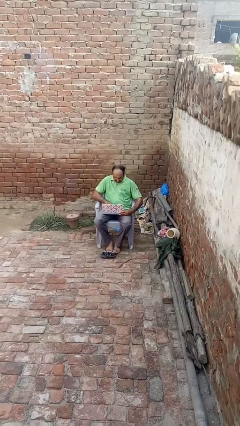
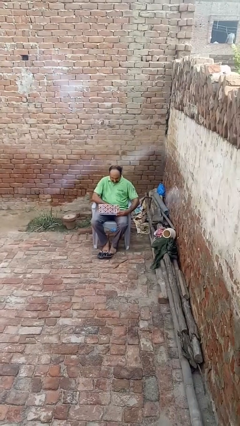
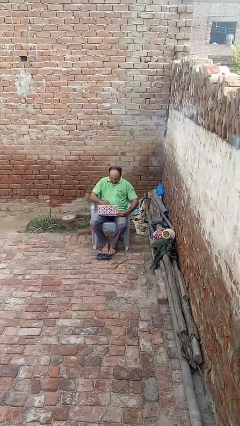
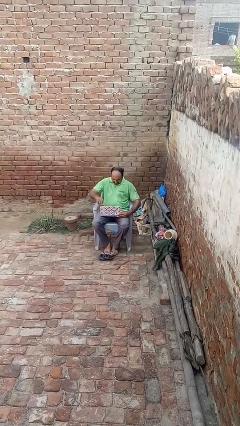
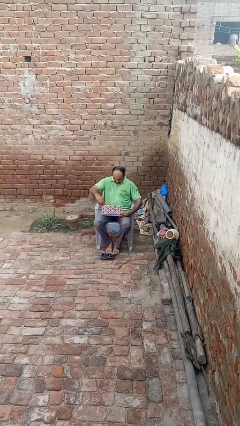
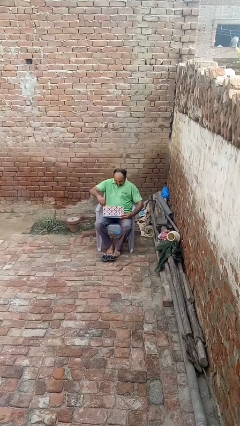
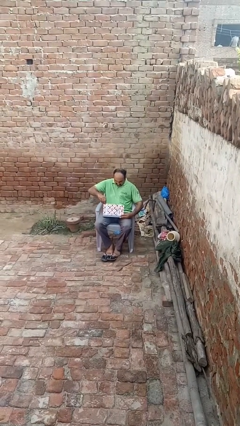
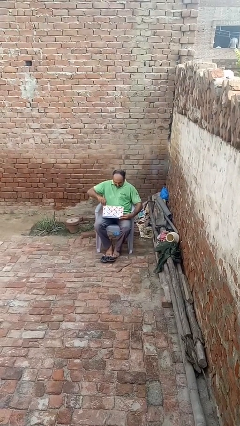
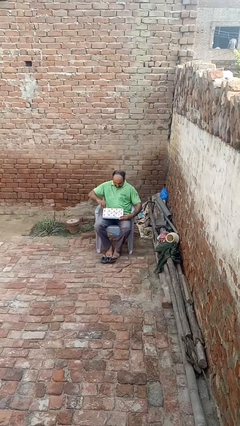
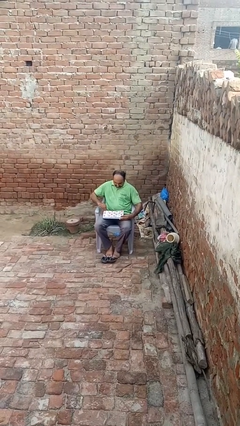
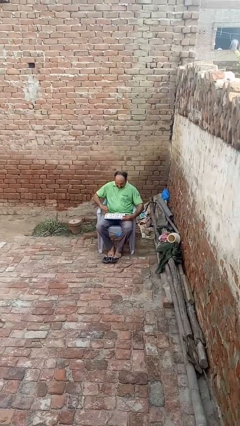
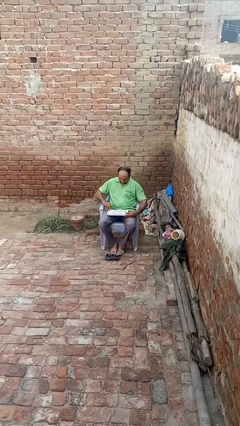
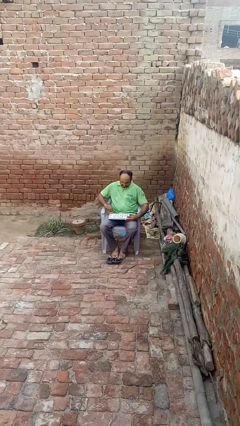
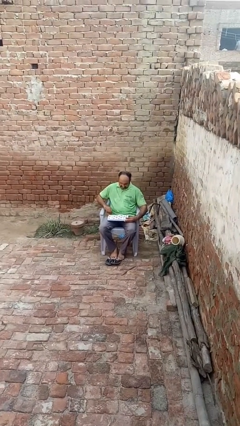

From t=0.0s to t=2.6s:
person closes laptop

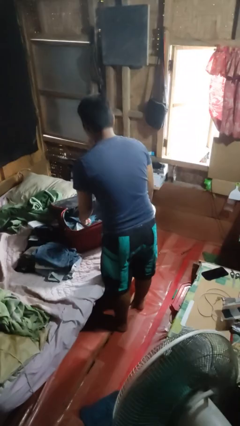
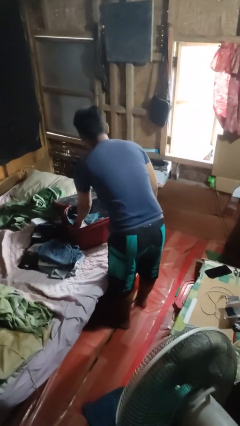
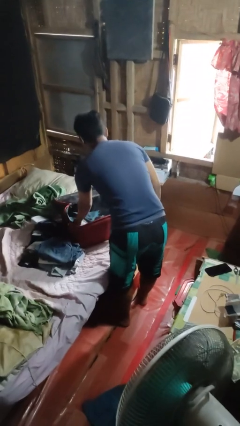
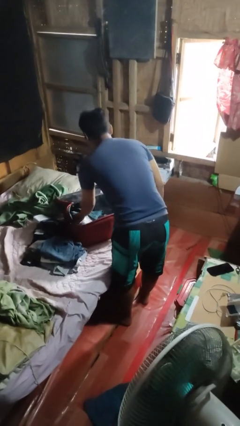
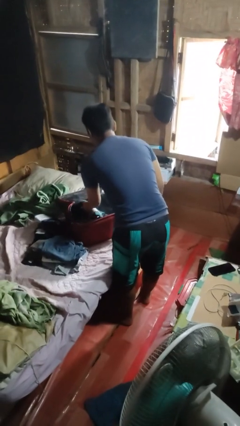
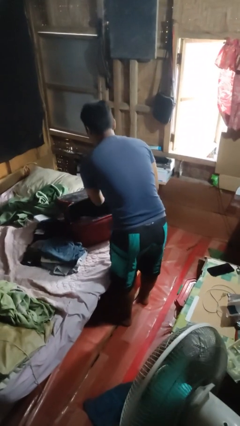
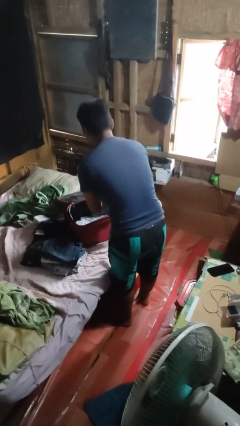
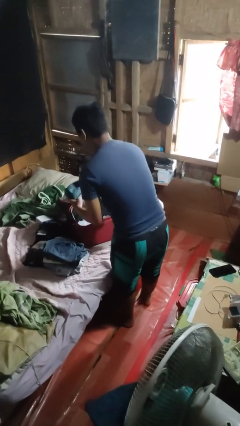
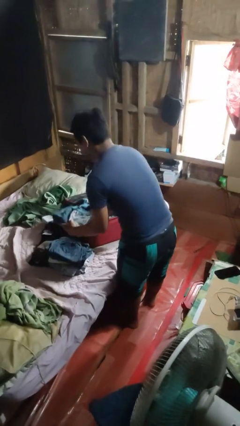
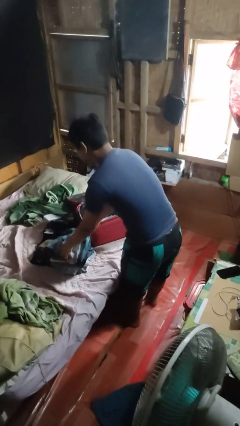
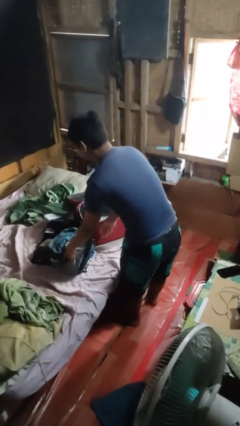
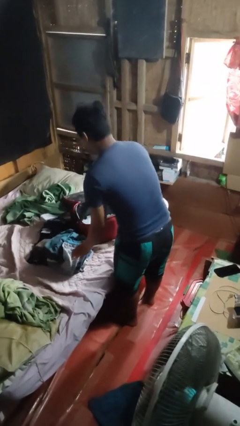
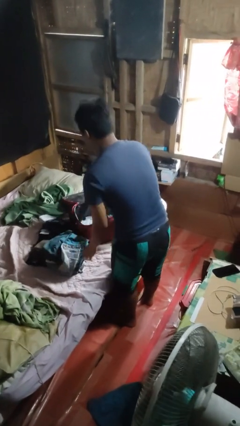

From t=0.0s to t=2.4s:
person unloads clothes from suitcase

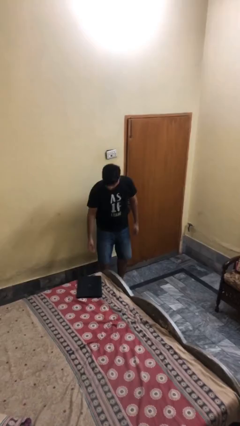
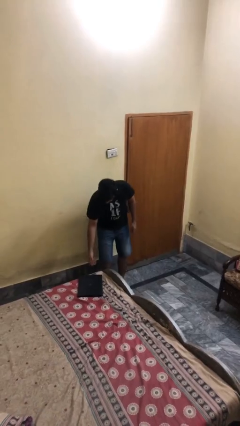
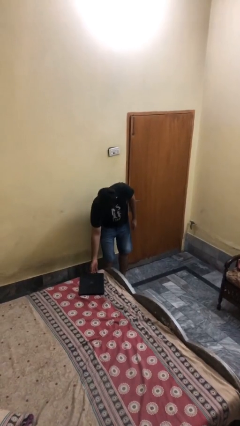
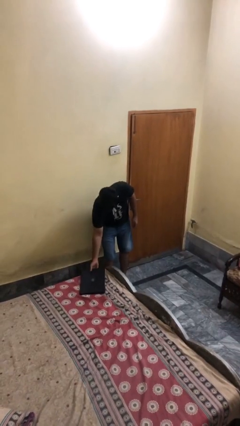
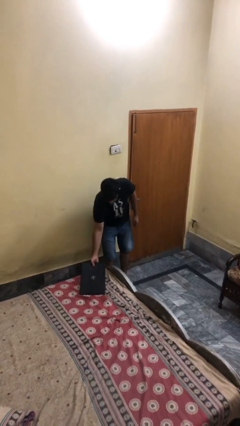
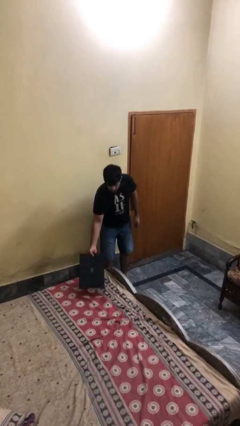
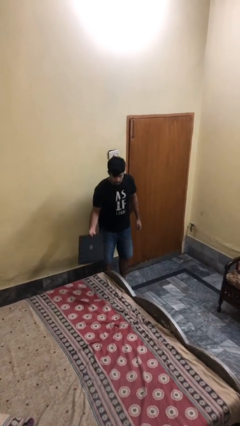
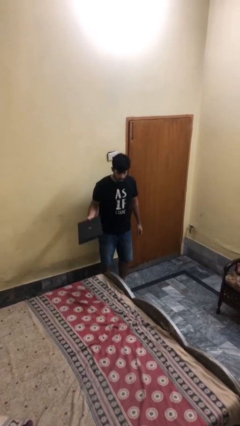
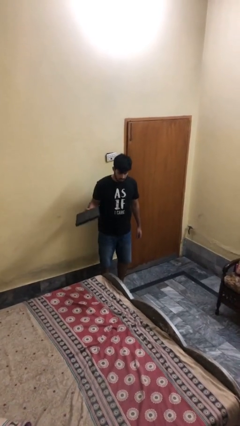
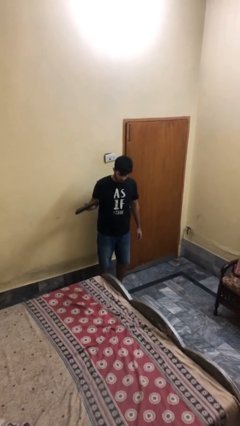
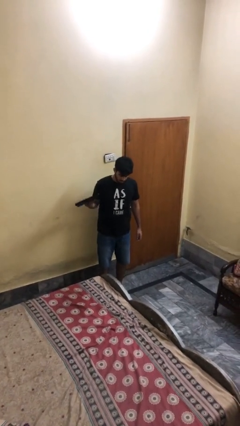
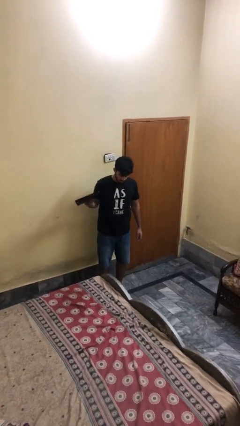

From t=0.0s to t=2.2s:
person picks up object from bed

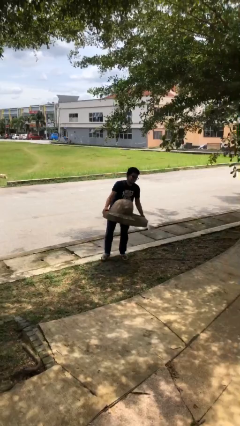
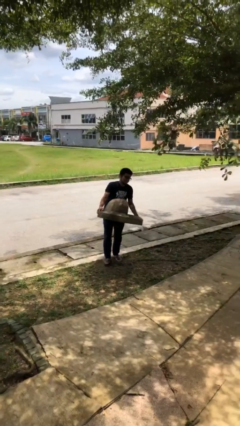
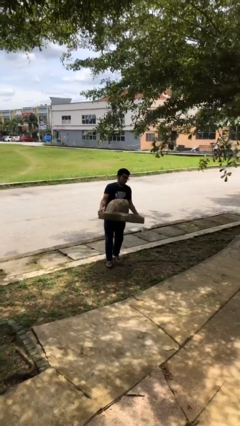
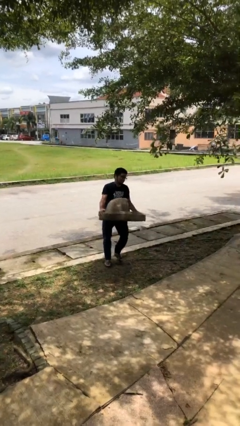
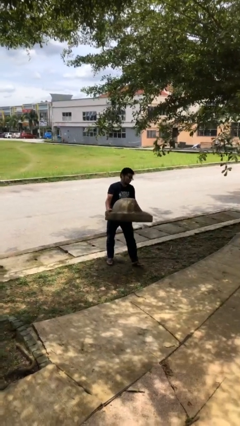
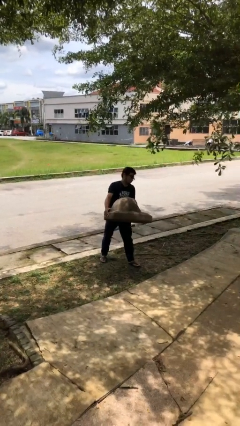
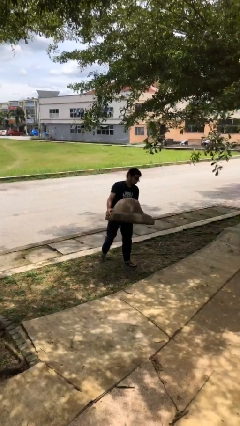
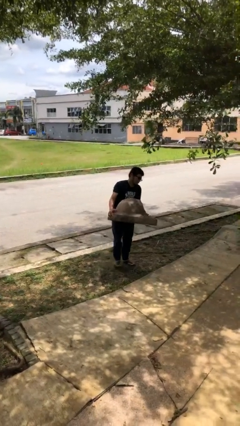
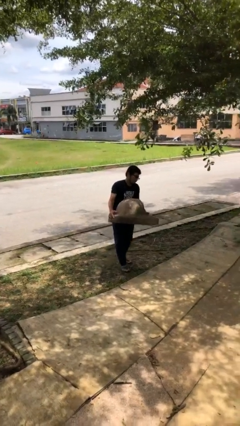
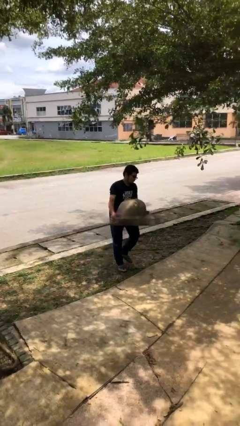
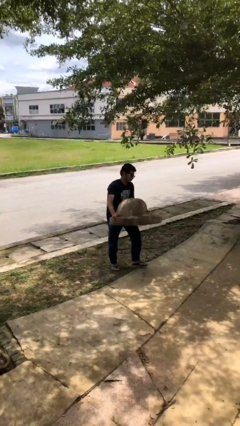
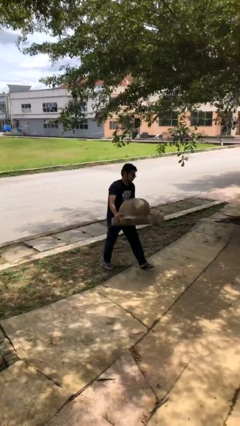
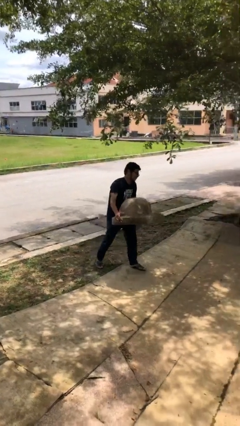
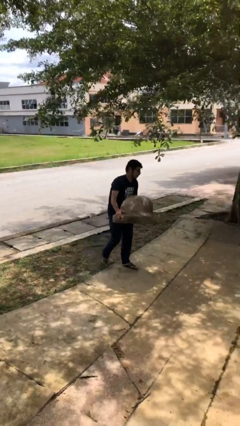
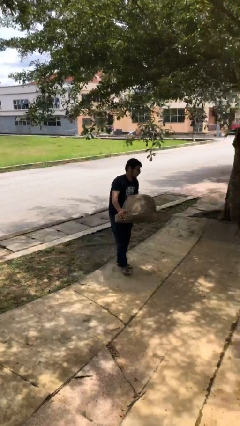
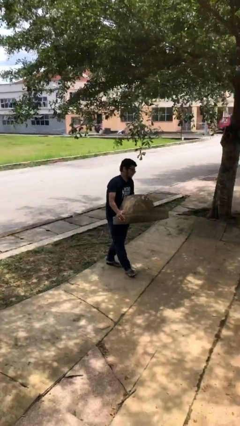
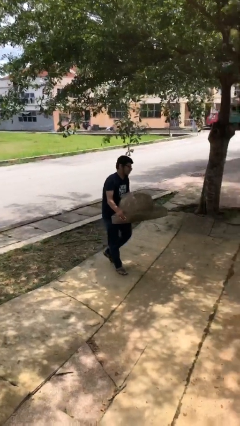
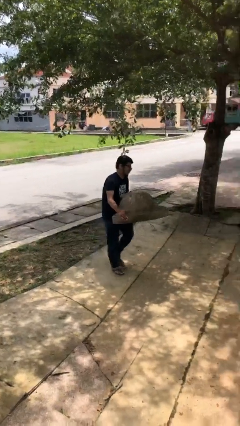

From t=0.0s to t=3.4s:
person carries heavy object

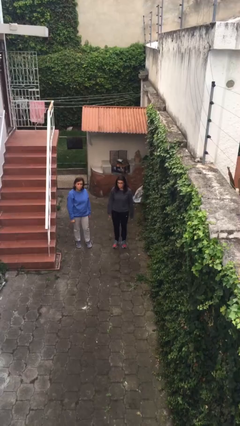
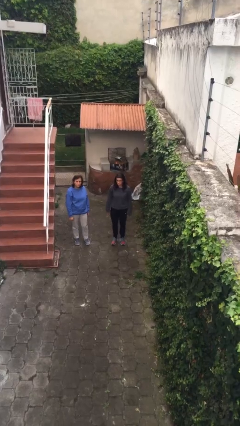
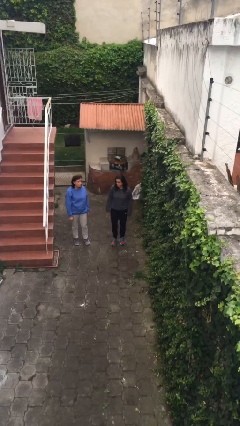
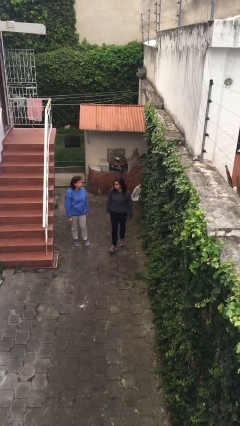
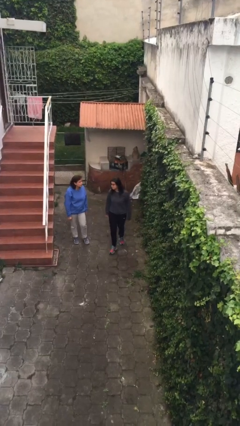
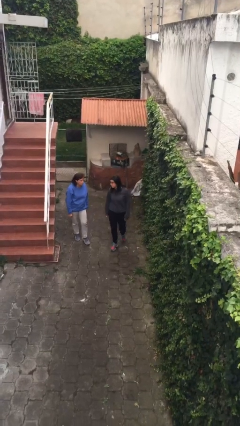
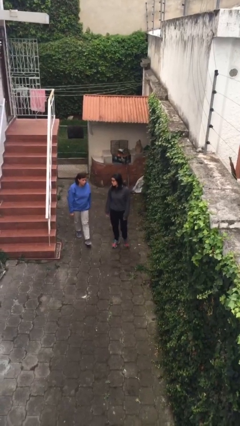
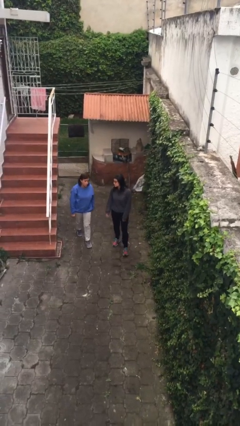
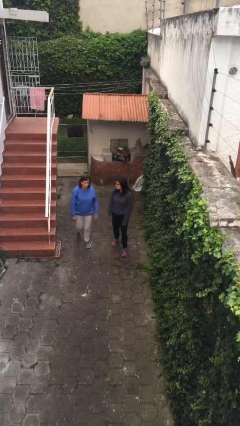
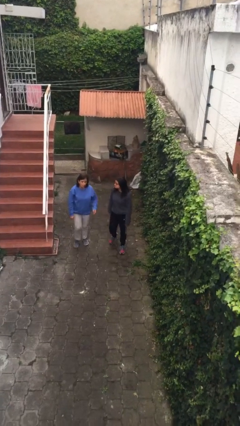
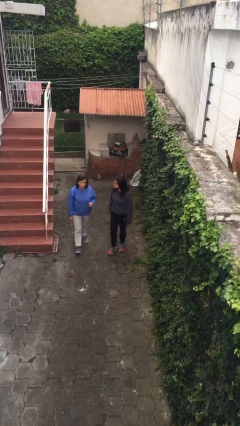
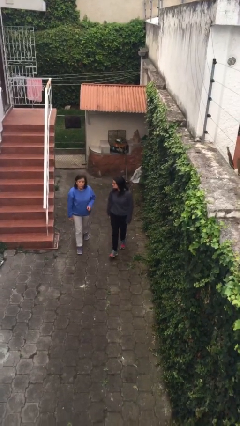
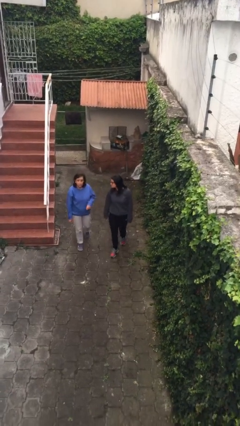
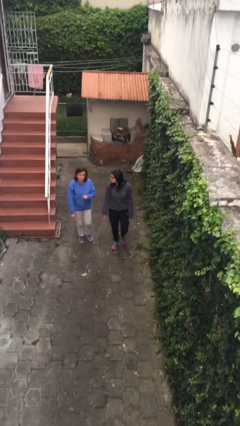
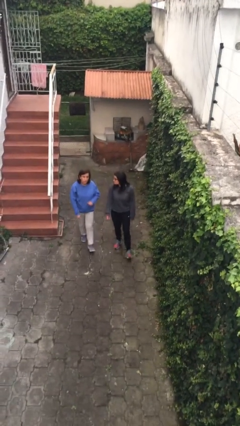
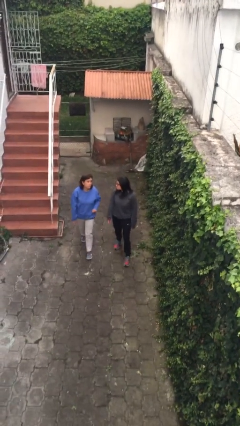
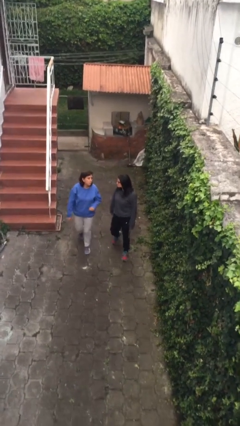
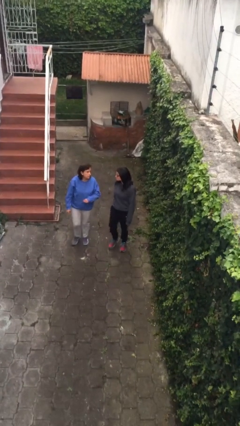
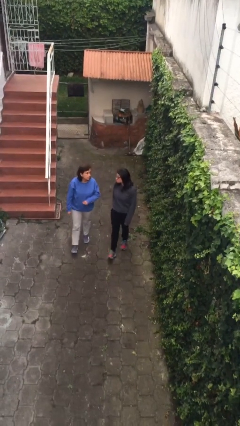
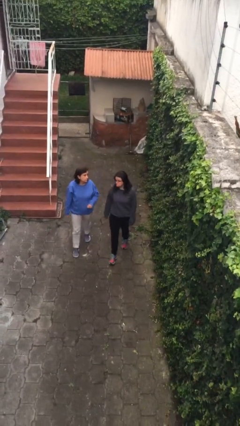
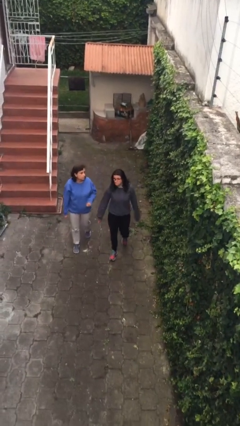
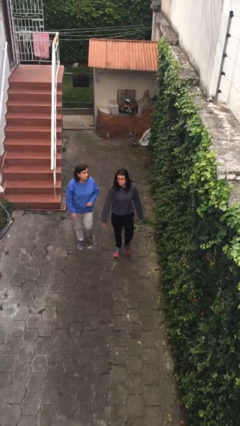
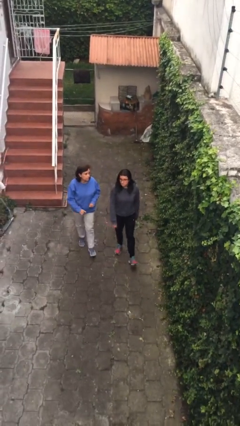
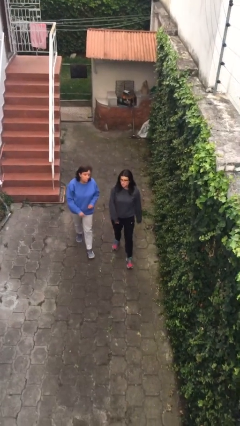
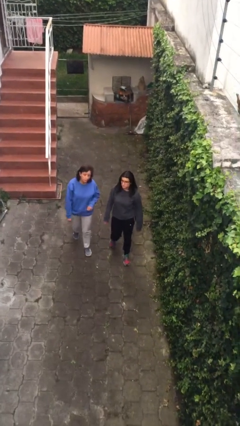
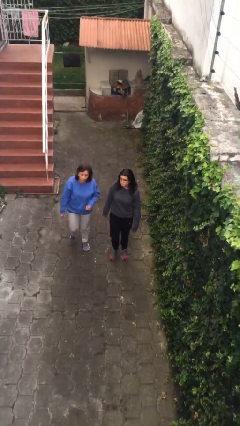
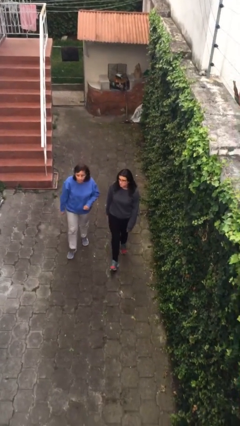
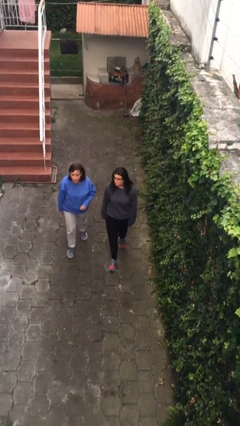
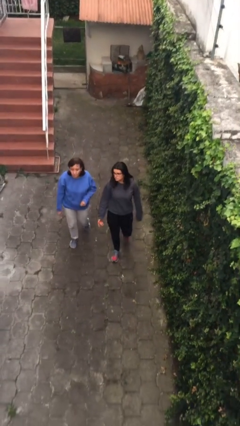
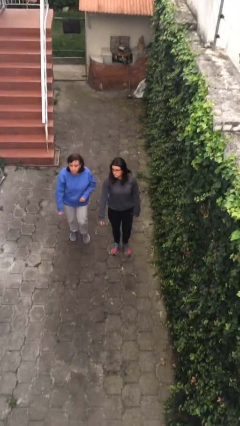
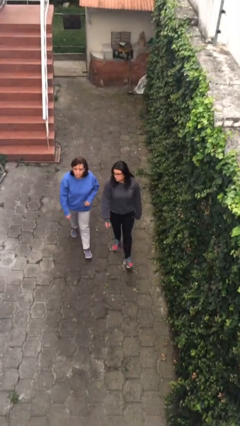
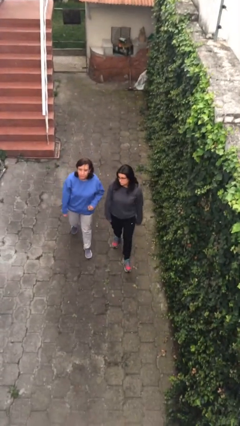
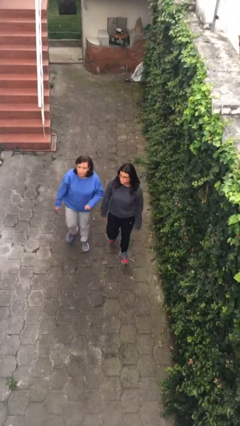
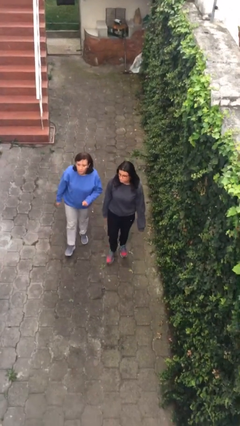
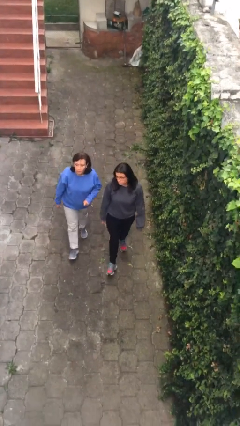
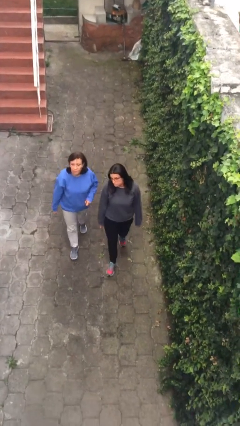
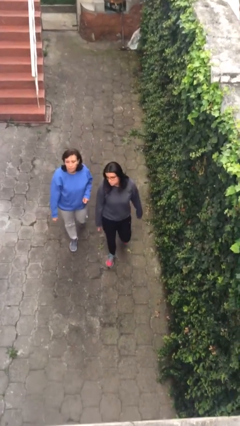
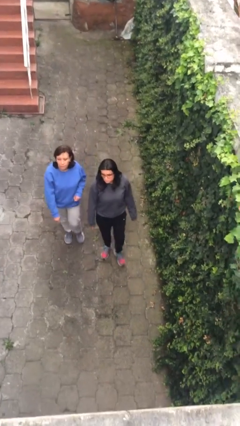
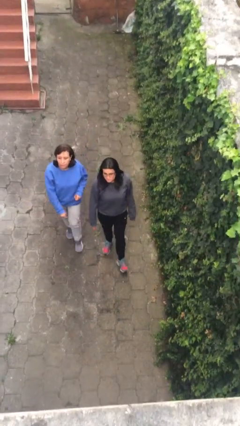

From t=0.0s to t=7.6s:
person talks to person
